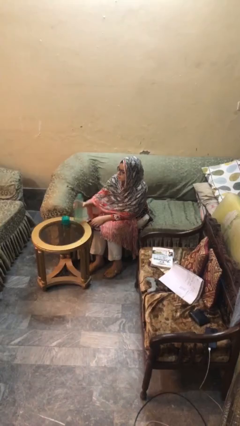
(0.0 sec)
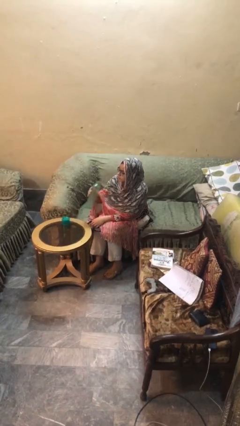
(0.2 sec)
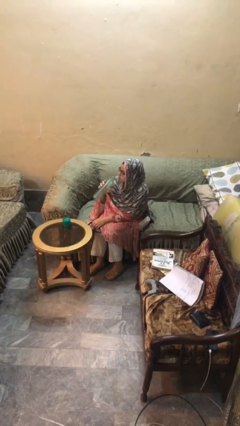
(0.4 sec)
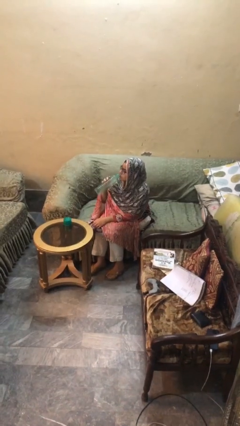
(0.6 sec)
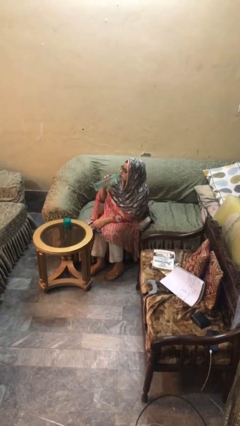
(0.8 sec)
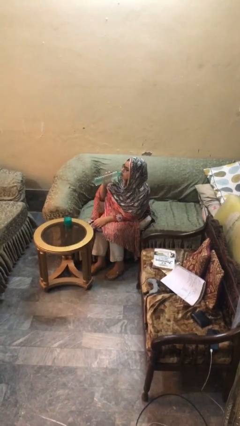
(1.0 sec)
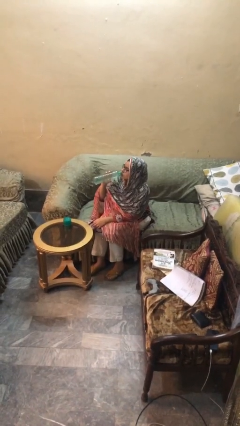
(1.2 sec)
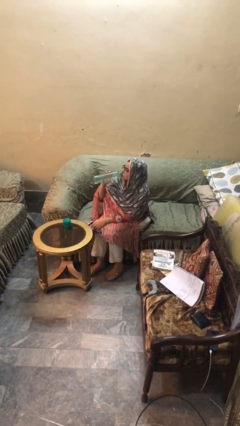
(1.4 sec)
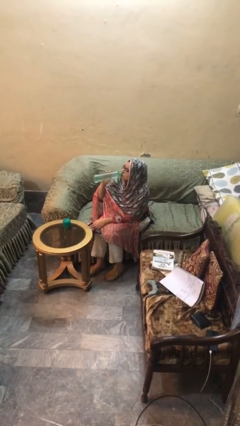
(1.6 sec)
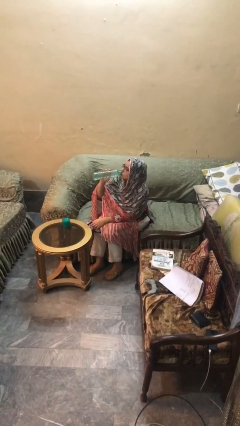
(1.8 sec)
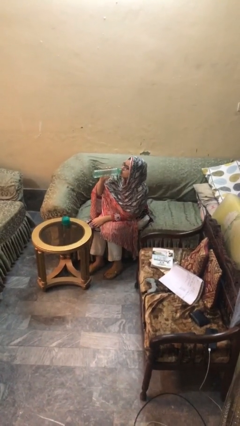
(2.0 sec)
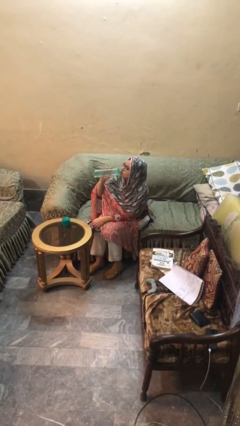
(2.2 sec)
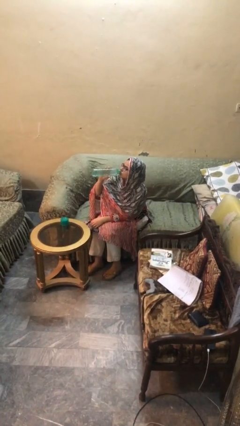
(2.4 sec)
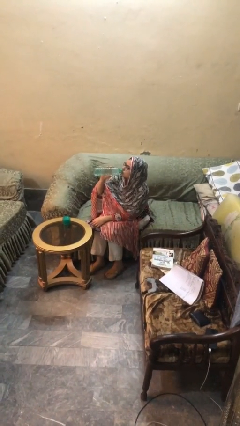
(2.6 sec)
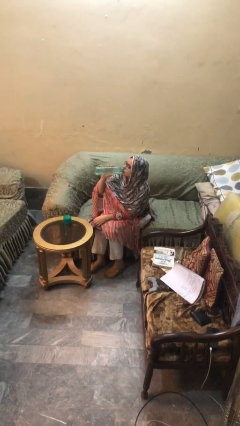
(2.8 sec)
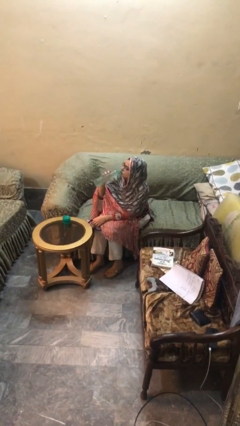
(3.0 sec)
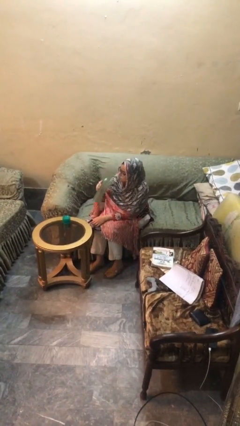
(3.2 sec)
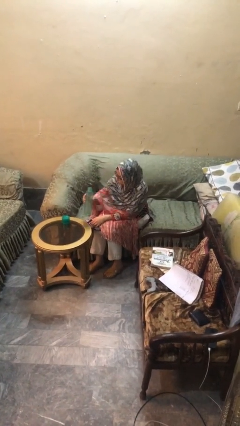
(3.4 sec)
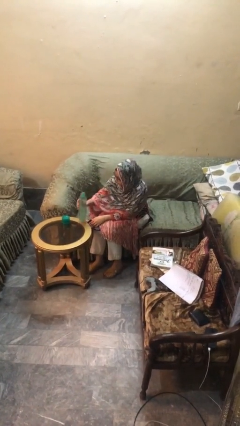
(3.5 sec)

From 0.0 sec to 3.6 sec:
person drinks from bottle

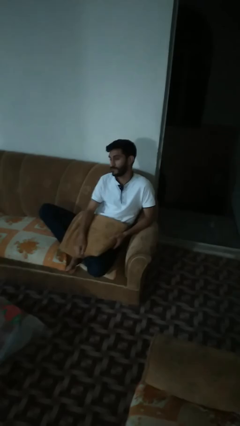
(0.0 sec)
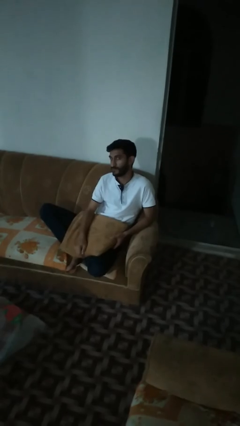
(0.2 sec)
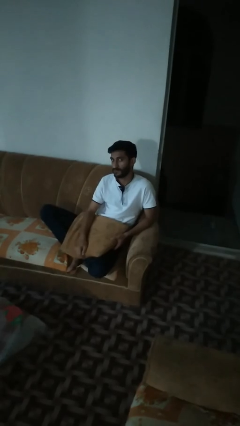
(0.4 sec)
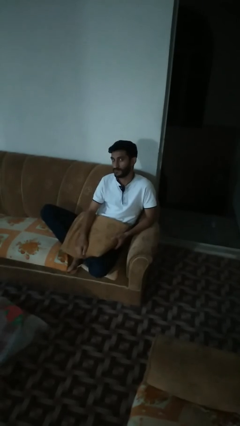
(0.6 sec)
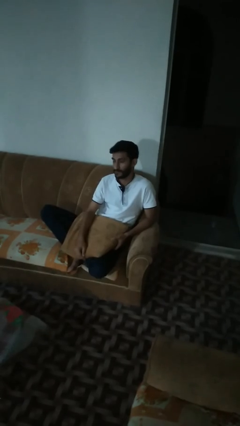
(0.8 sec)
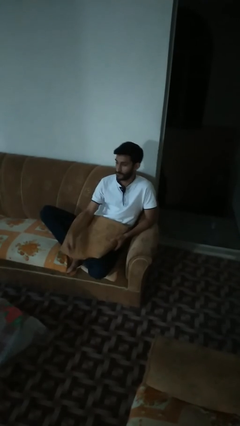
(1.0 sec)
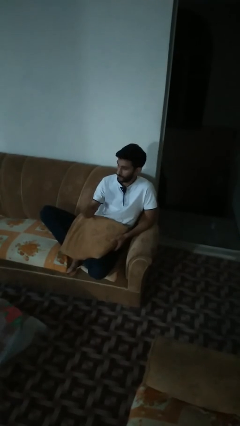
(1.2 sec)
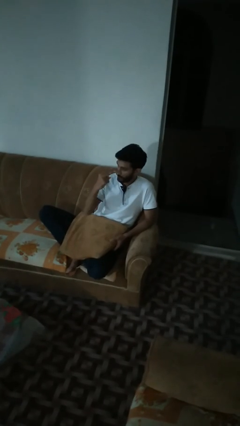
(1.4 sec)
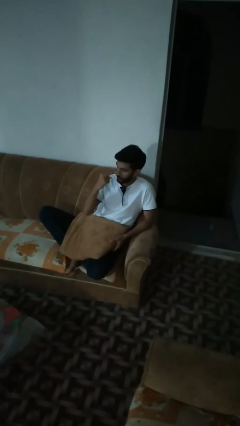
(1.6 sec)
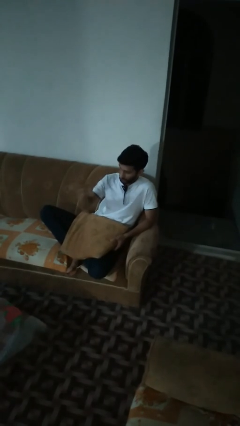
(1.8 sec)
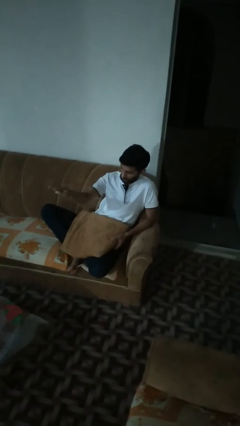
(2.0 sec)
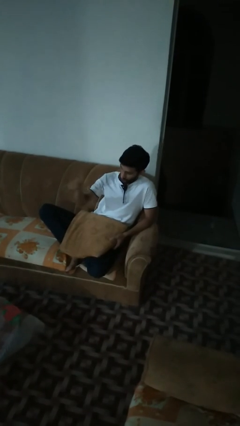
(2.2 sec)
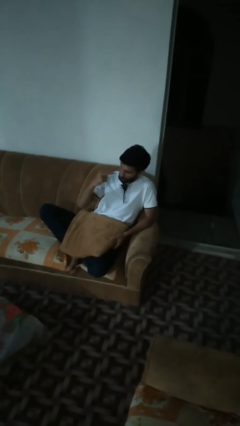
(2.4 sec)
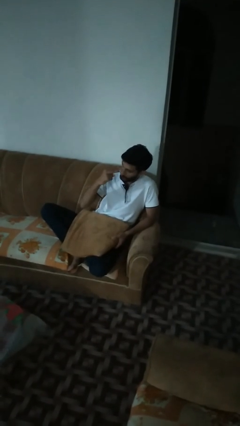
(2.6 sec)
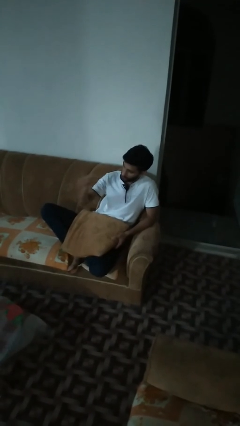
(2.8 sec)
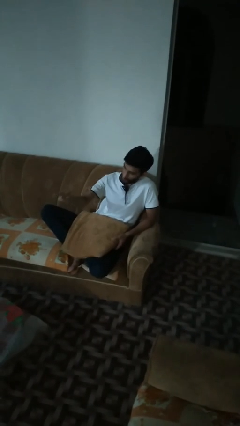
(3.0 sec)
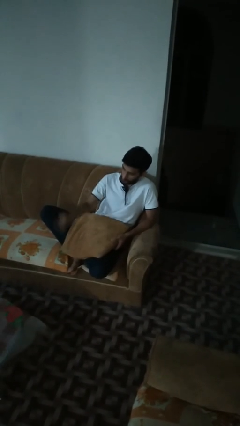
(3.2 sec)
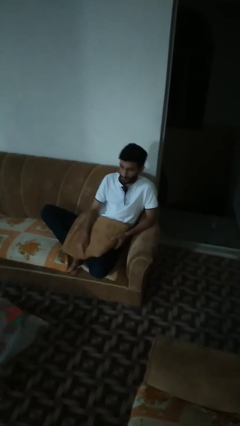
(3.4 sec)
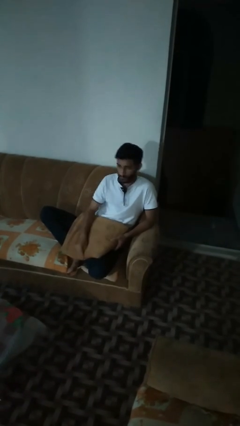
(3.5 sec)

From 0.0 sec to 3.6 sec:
person gestures watch closely

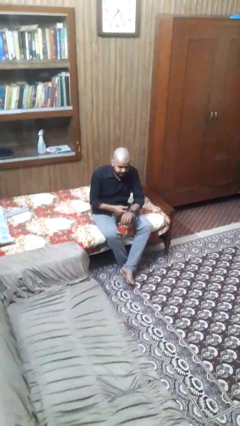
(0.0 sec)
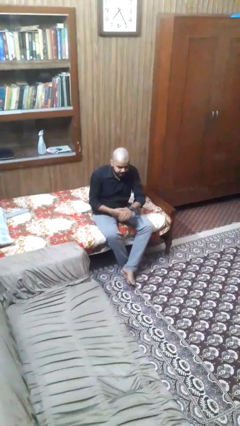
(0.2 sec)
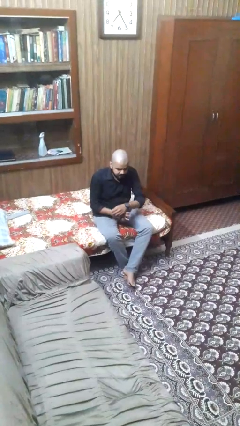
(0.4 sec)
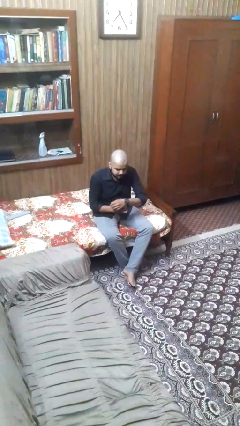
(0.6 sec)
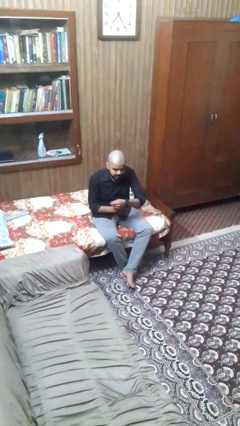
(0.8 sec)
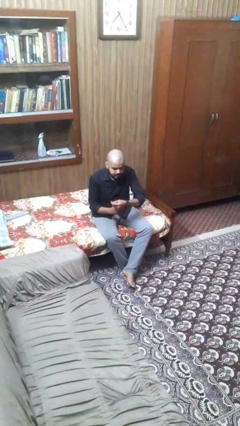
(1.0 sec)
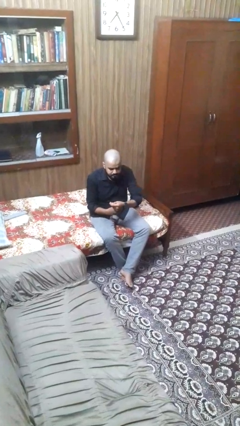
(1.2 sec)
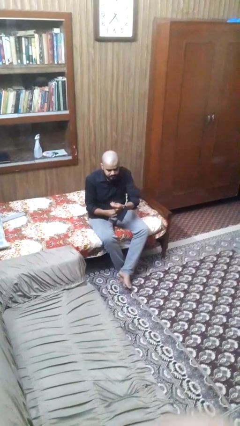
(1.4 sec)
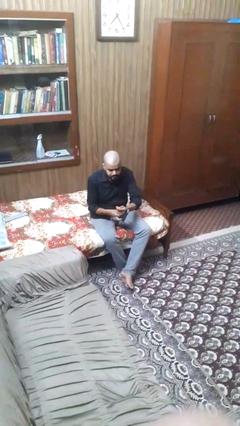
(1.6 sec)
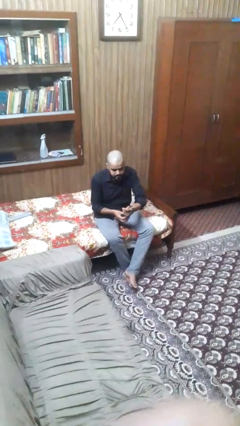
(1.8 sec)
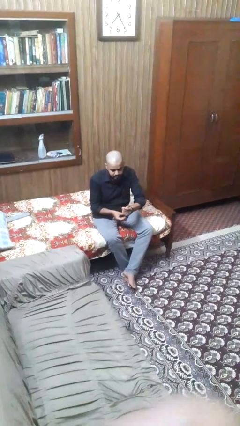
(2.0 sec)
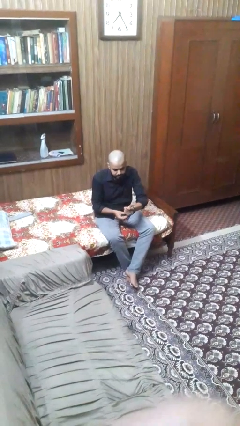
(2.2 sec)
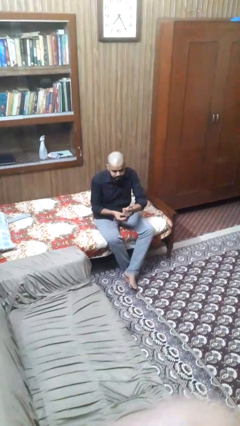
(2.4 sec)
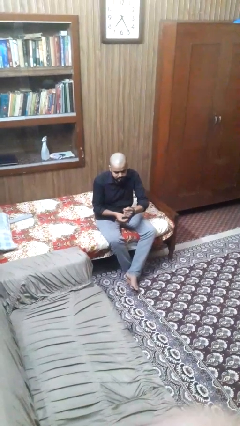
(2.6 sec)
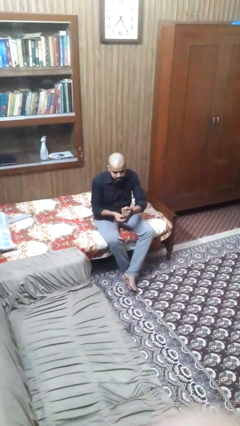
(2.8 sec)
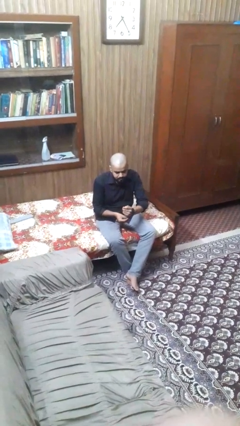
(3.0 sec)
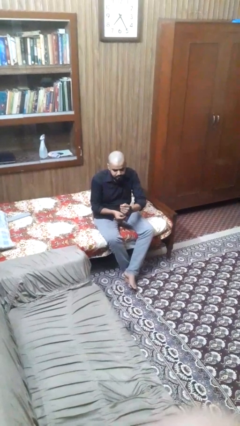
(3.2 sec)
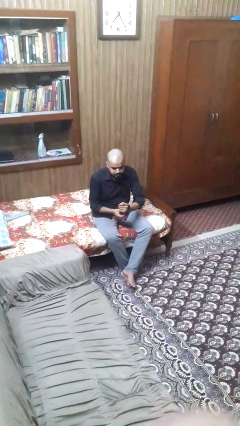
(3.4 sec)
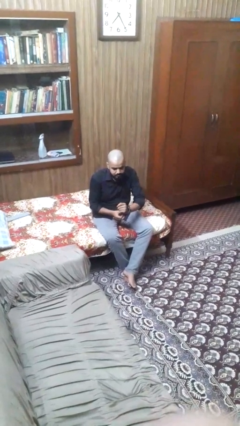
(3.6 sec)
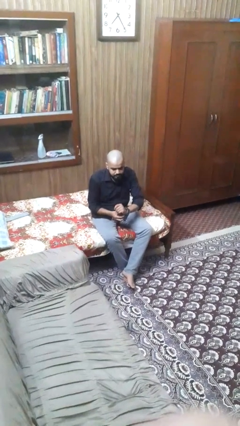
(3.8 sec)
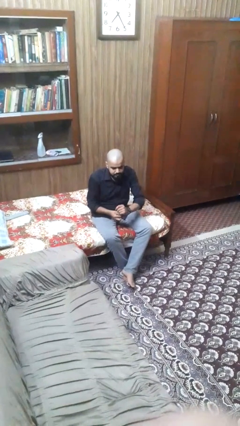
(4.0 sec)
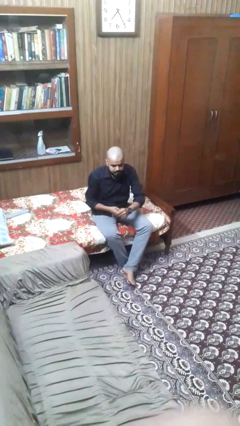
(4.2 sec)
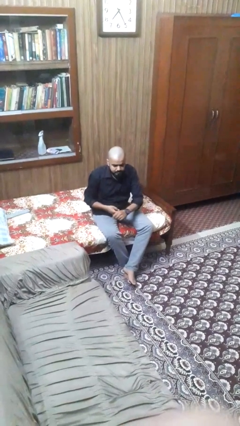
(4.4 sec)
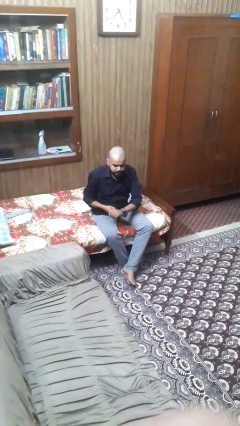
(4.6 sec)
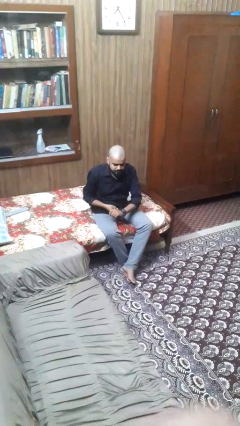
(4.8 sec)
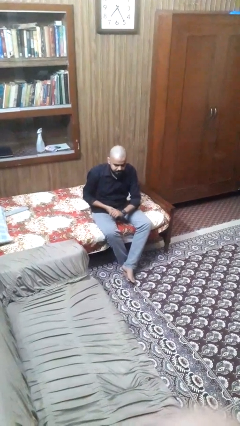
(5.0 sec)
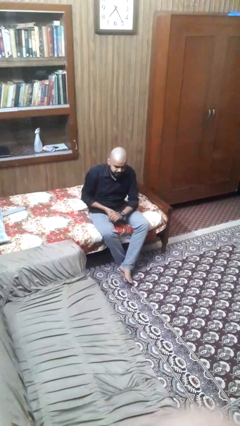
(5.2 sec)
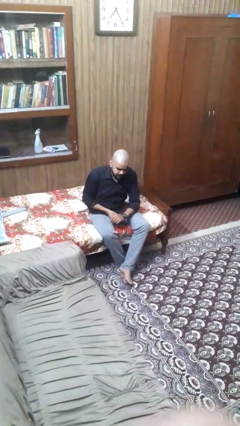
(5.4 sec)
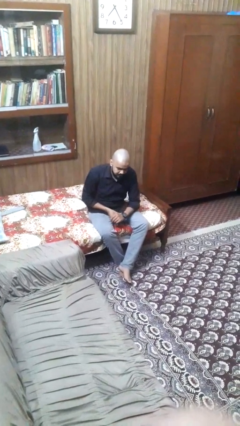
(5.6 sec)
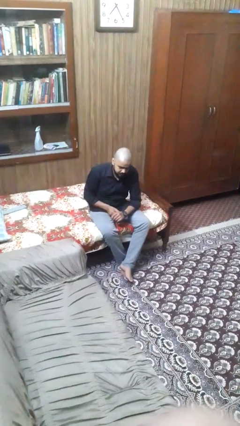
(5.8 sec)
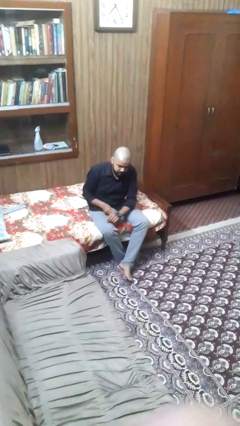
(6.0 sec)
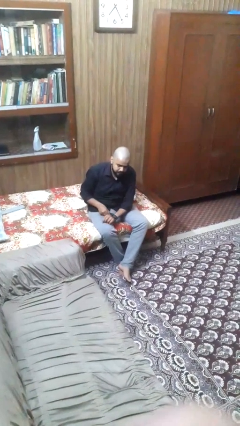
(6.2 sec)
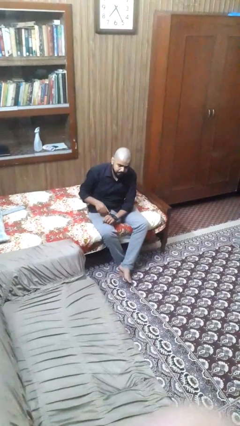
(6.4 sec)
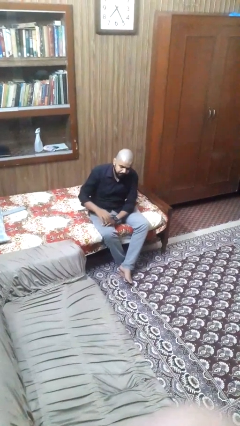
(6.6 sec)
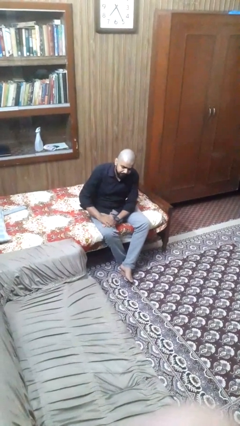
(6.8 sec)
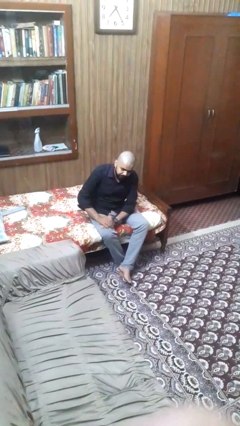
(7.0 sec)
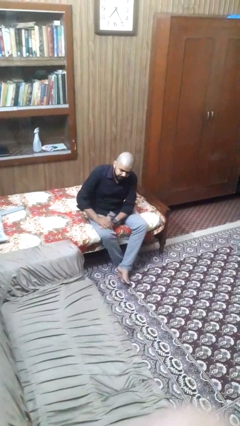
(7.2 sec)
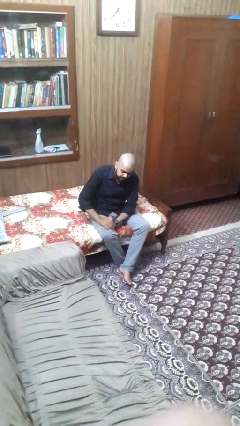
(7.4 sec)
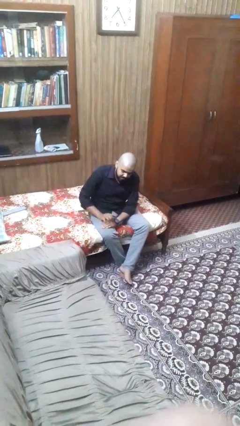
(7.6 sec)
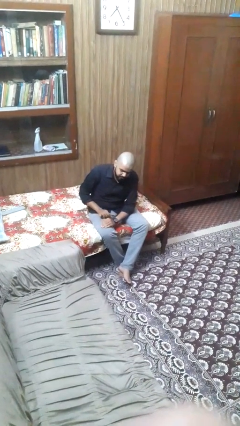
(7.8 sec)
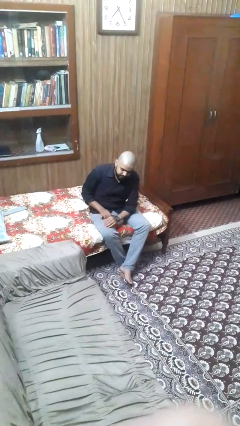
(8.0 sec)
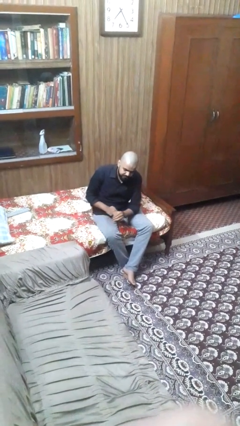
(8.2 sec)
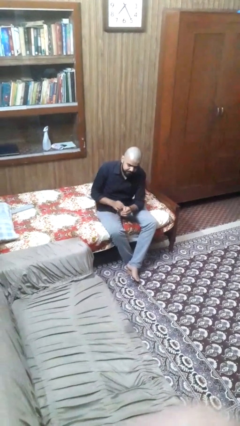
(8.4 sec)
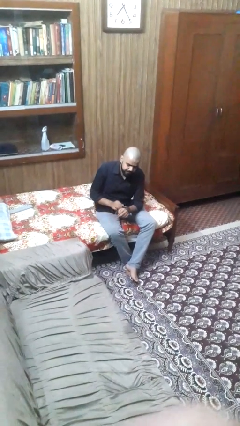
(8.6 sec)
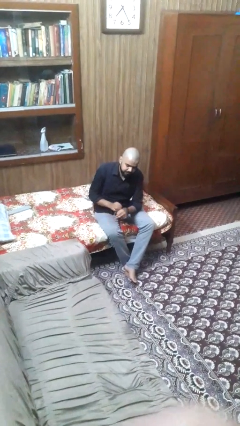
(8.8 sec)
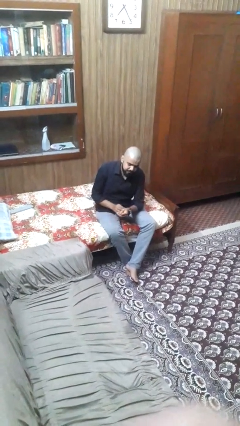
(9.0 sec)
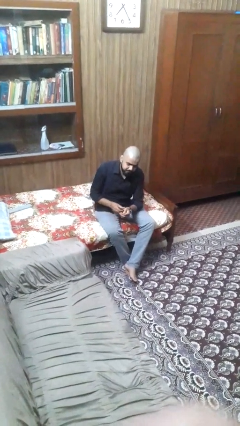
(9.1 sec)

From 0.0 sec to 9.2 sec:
person puts on wristwatch

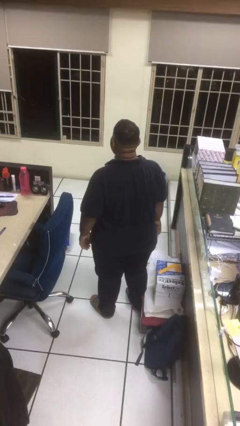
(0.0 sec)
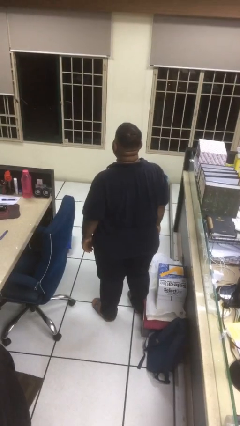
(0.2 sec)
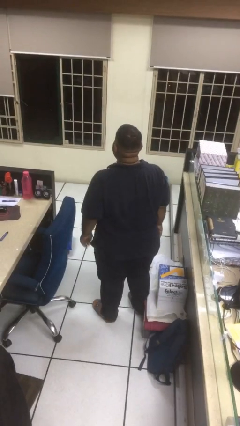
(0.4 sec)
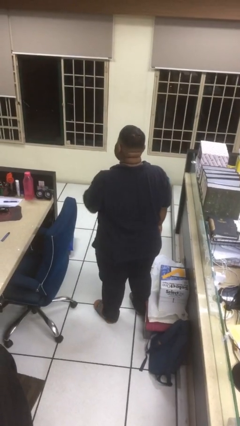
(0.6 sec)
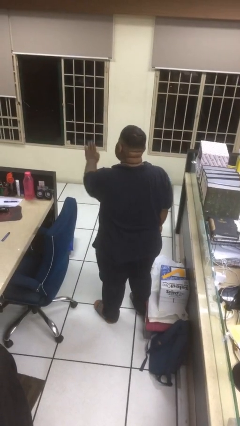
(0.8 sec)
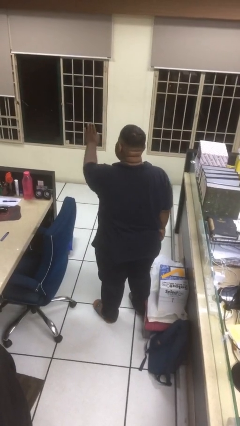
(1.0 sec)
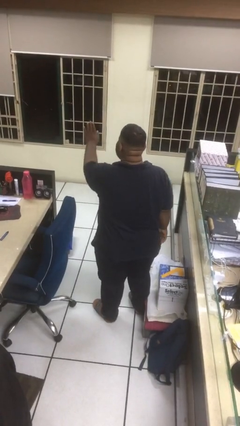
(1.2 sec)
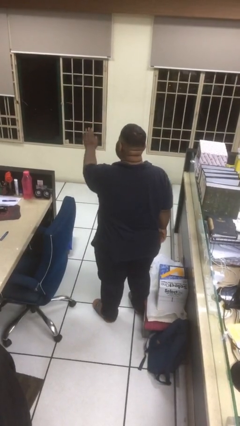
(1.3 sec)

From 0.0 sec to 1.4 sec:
person gestures stop
